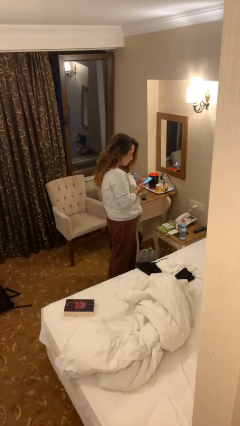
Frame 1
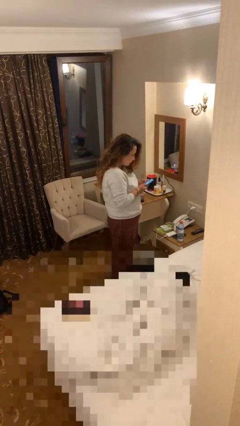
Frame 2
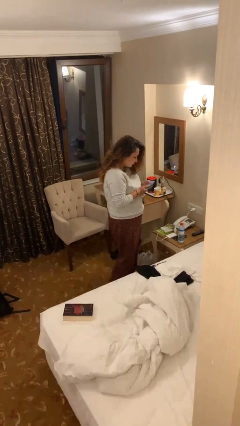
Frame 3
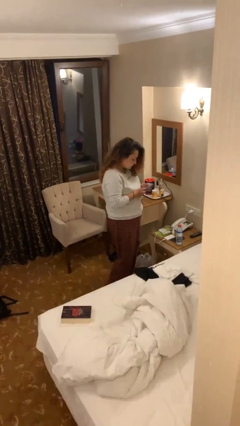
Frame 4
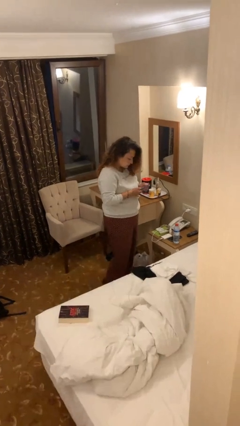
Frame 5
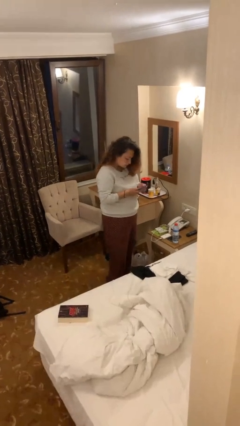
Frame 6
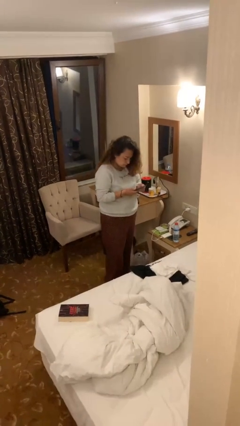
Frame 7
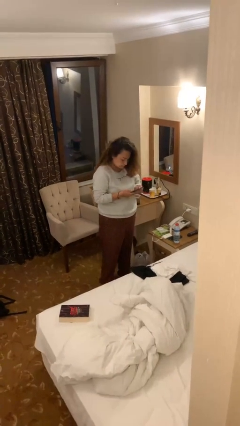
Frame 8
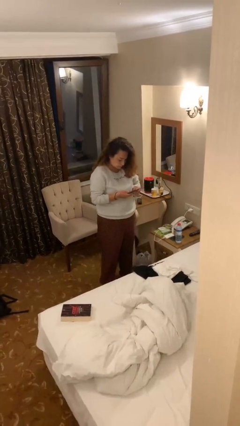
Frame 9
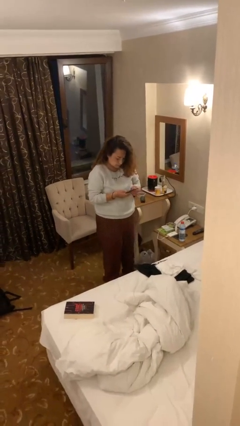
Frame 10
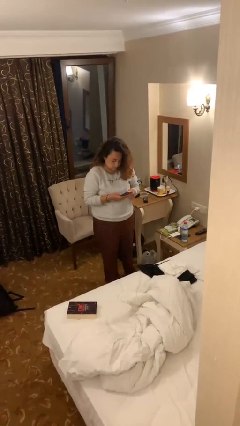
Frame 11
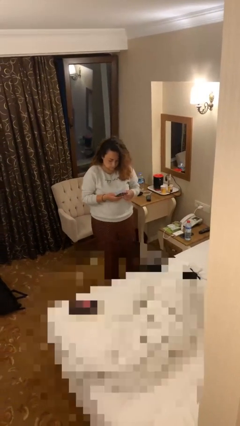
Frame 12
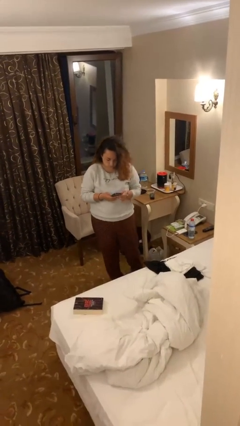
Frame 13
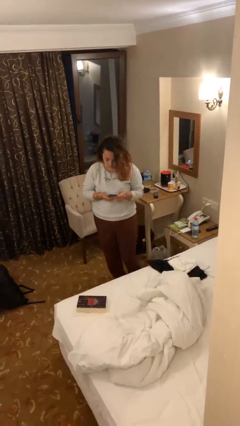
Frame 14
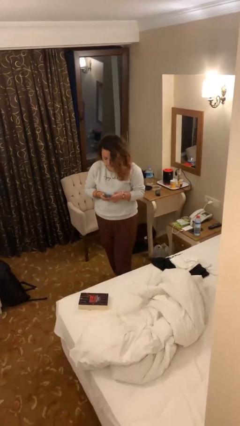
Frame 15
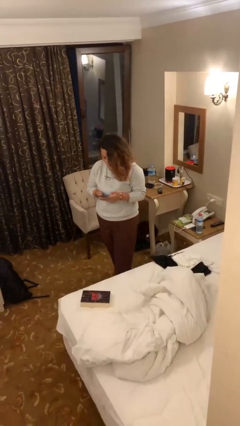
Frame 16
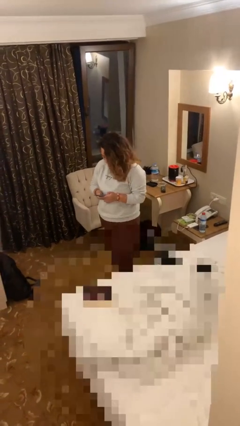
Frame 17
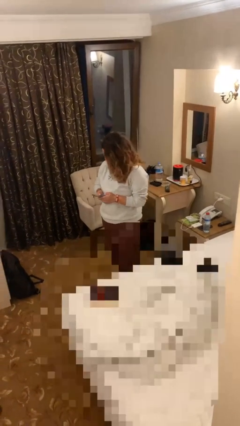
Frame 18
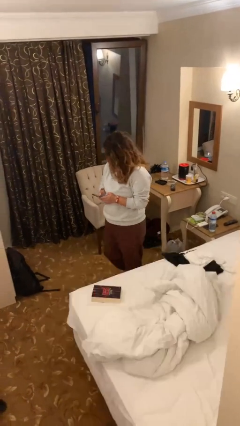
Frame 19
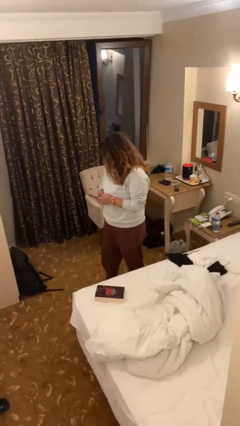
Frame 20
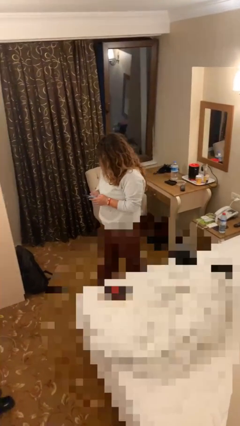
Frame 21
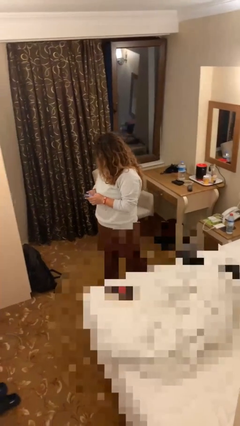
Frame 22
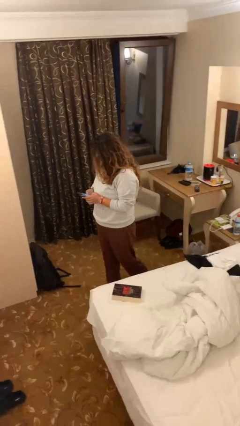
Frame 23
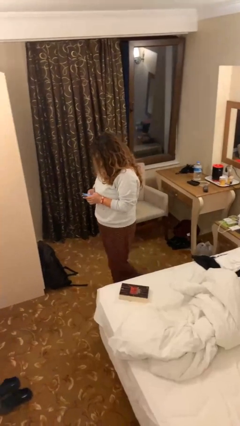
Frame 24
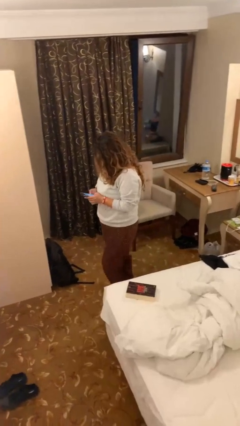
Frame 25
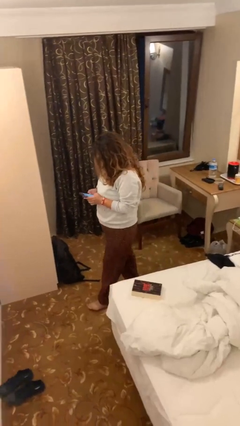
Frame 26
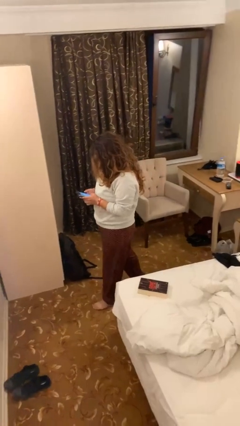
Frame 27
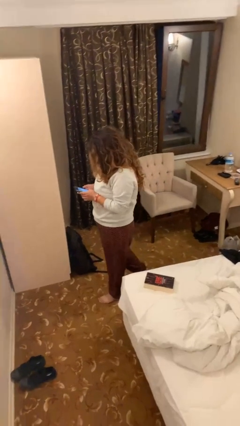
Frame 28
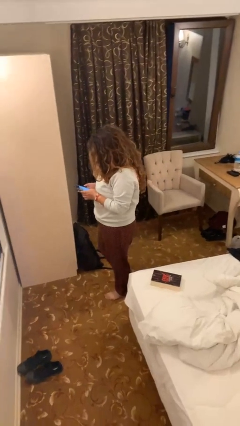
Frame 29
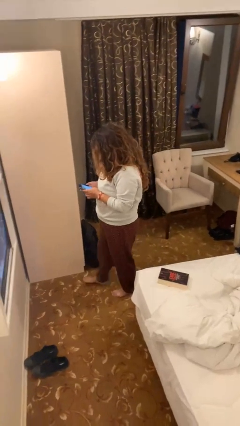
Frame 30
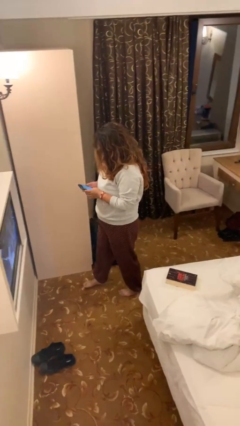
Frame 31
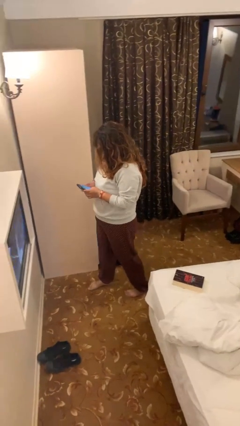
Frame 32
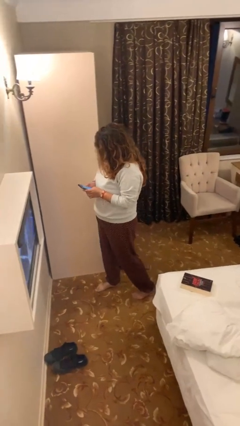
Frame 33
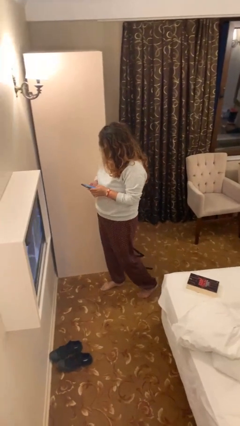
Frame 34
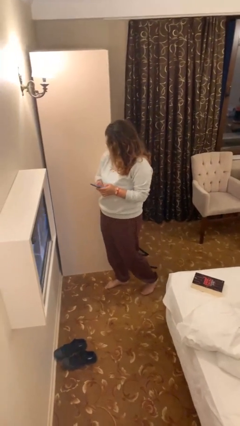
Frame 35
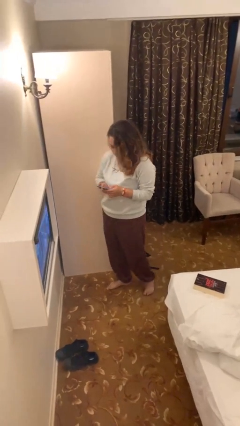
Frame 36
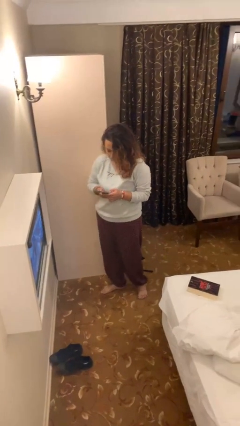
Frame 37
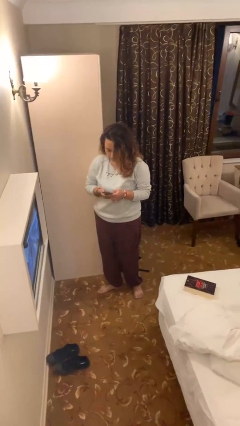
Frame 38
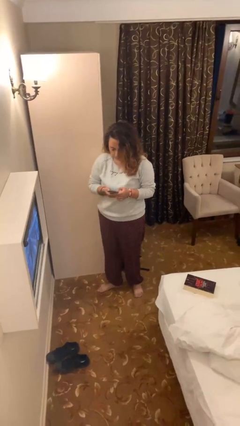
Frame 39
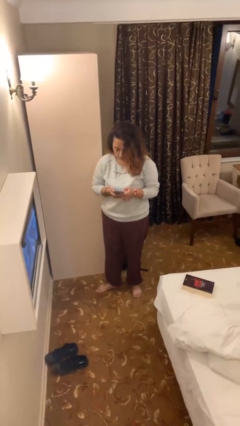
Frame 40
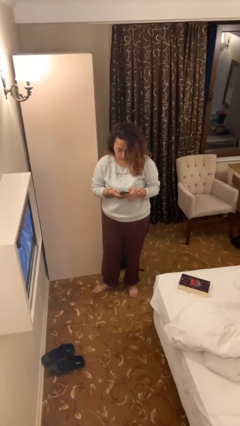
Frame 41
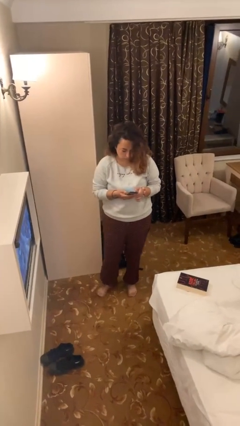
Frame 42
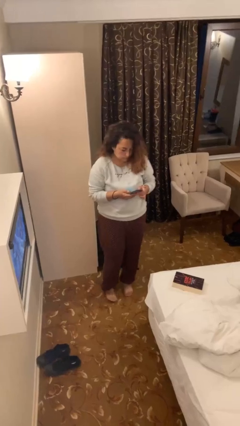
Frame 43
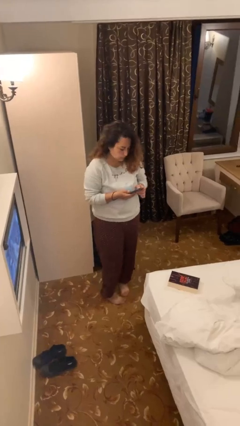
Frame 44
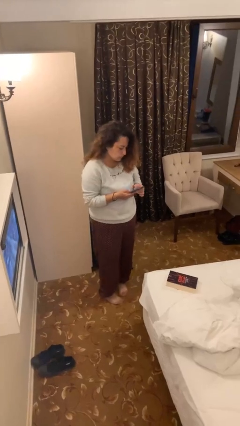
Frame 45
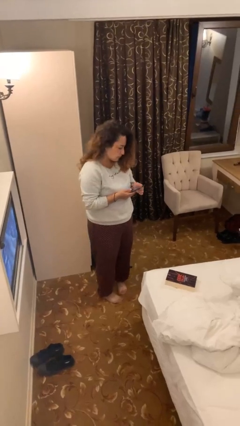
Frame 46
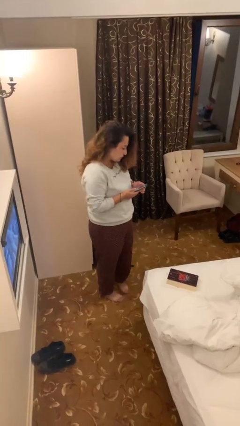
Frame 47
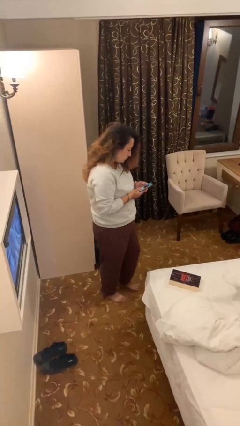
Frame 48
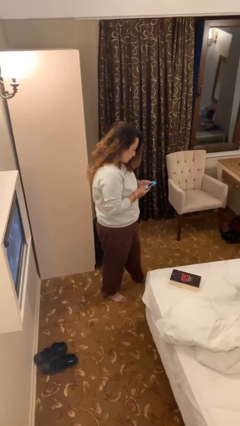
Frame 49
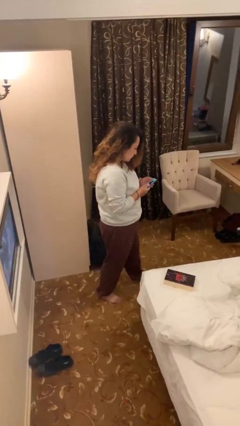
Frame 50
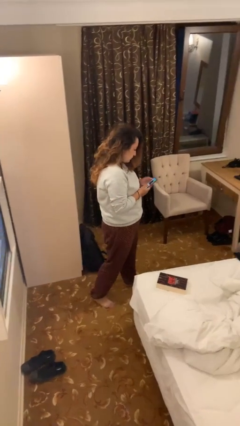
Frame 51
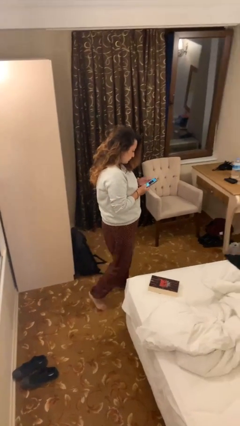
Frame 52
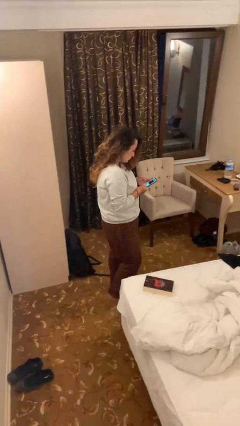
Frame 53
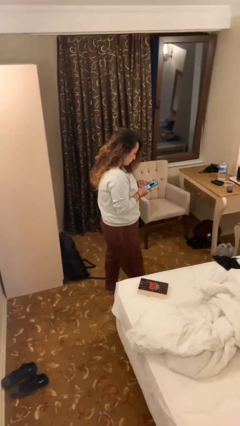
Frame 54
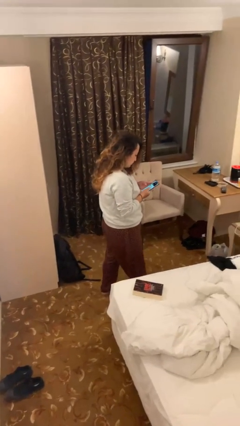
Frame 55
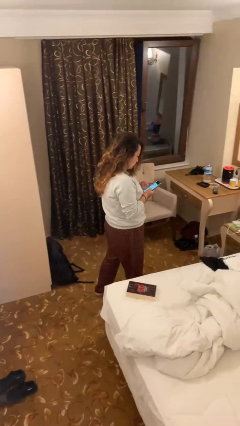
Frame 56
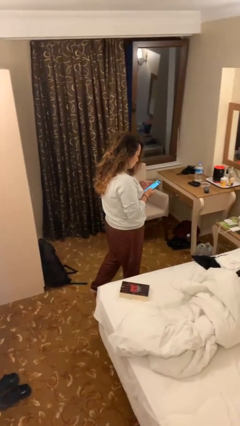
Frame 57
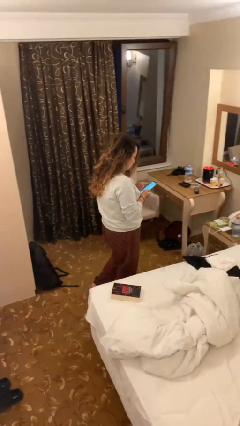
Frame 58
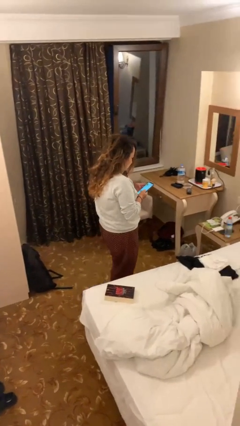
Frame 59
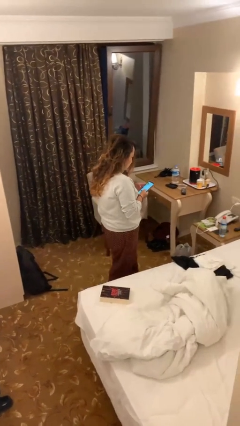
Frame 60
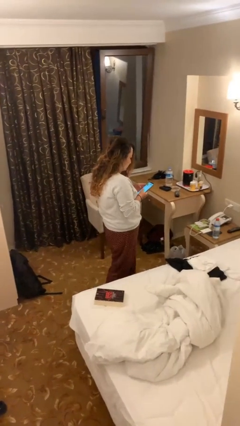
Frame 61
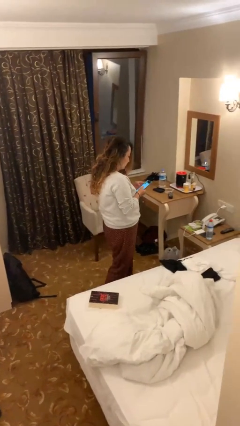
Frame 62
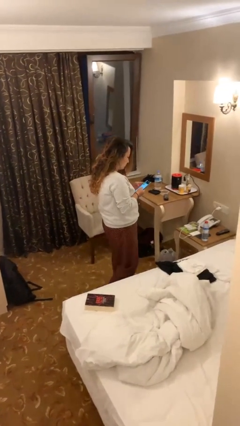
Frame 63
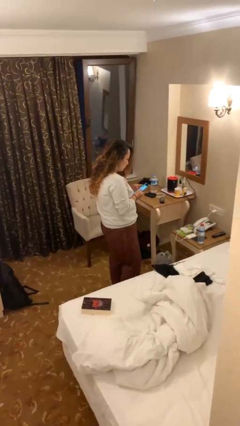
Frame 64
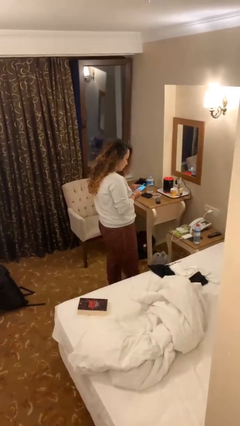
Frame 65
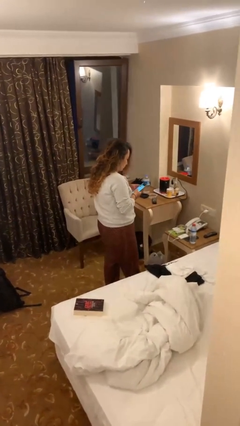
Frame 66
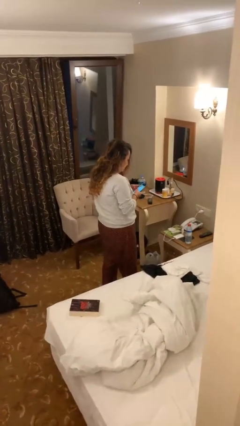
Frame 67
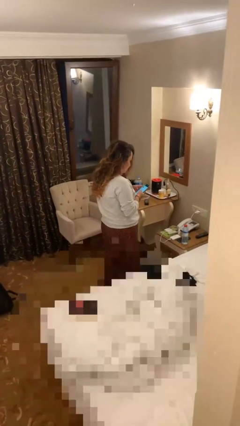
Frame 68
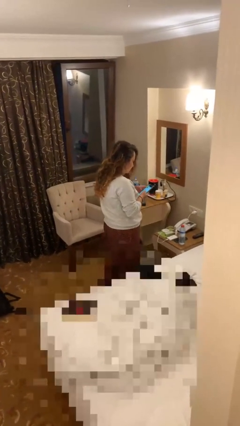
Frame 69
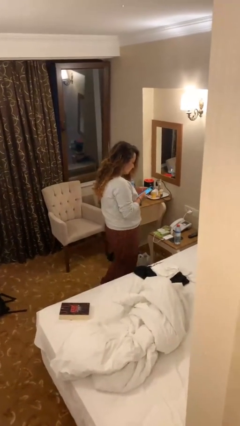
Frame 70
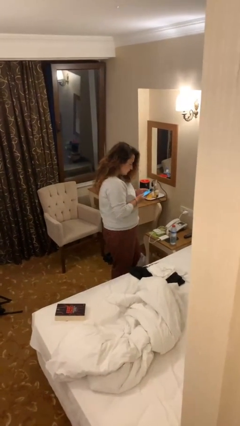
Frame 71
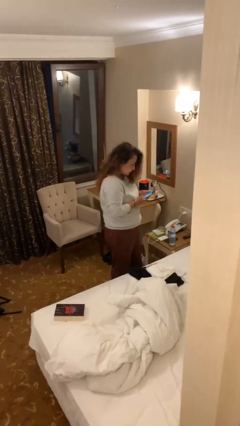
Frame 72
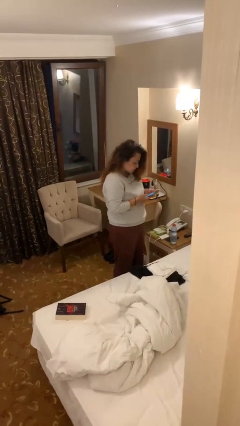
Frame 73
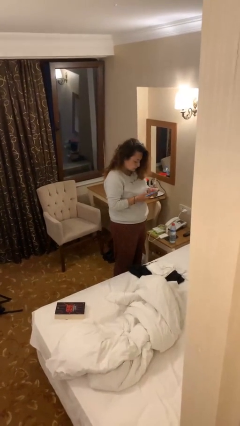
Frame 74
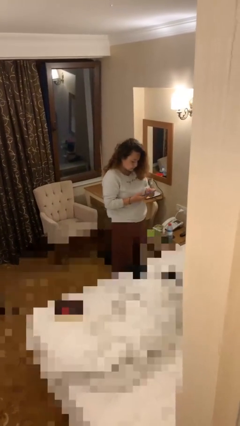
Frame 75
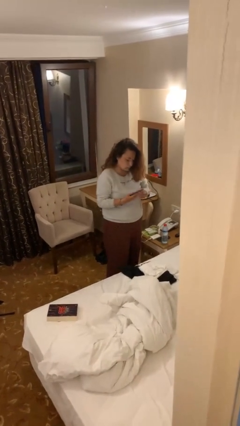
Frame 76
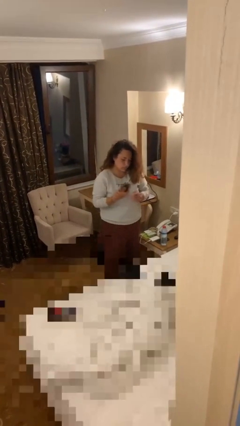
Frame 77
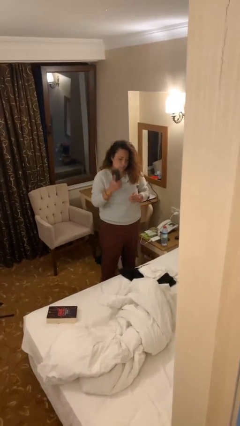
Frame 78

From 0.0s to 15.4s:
person texts on phone

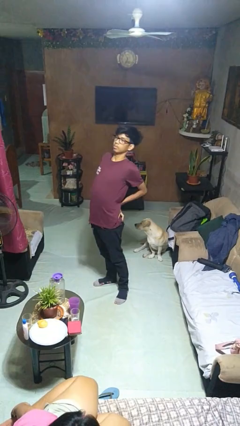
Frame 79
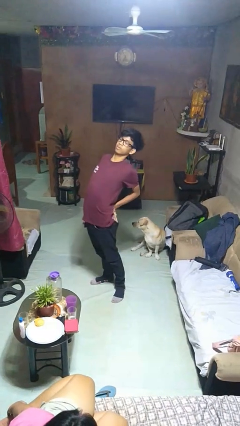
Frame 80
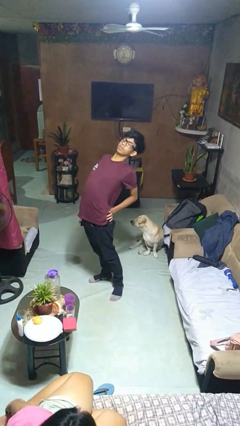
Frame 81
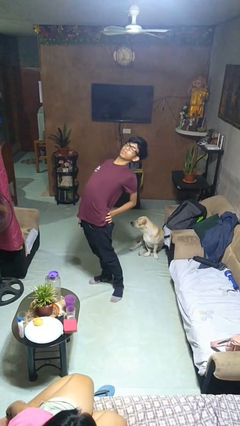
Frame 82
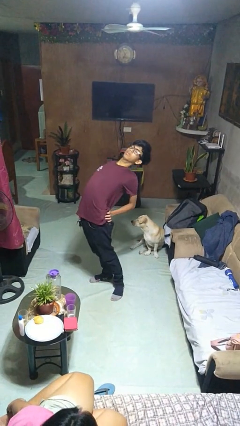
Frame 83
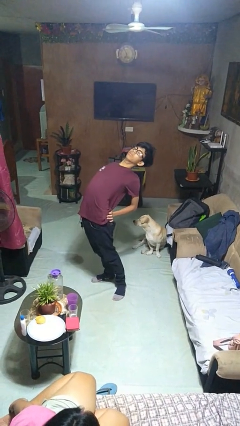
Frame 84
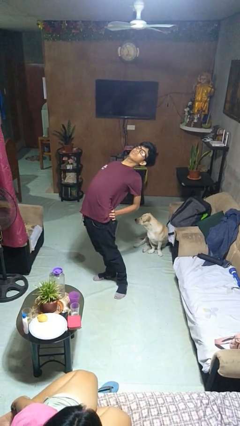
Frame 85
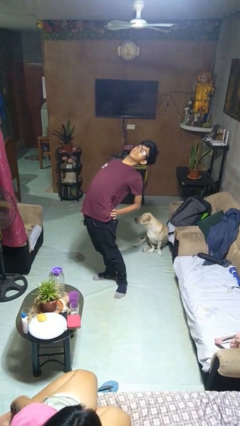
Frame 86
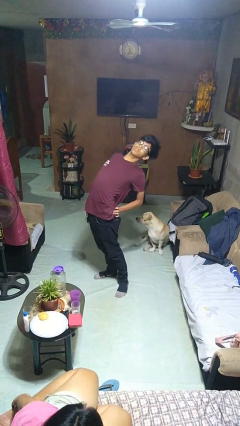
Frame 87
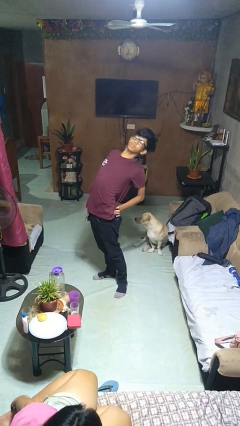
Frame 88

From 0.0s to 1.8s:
person stretches back

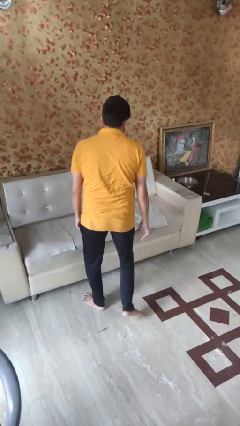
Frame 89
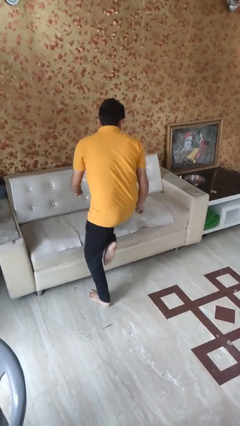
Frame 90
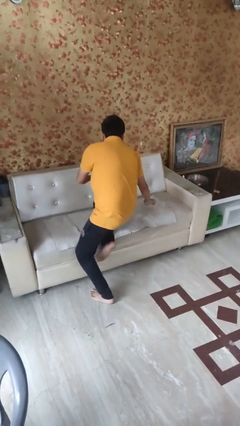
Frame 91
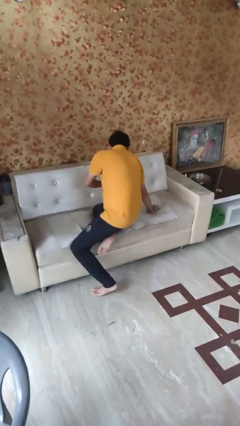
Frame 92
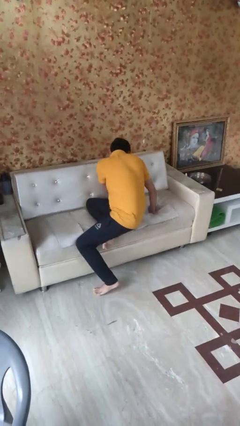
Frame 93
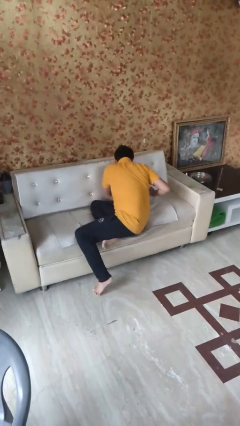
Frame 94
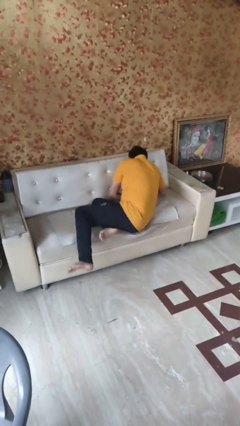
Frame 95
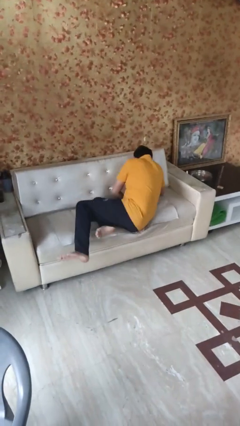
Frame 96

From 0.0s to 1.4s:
person lies down on bed
